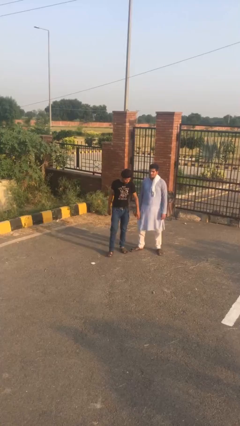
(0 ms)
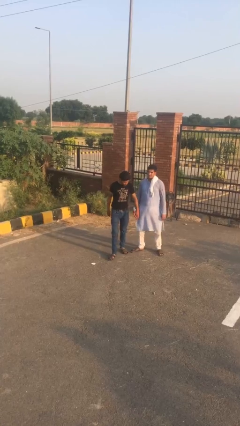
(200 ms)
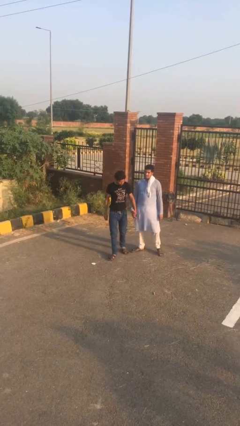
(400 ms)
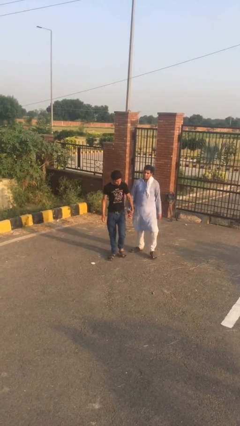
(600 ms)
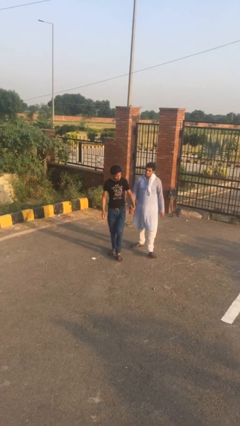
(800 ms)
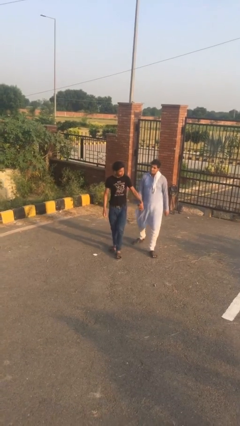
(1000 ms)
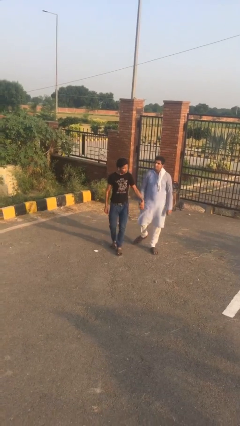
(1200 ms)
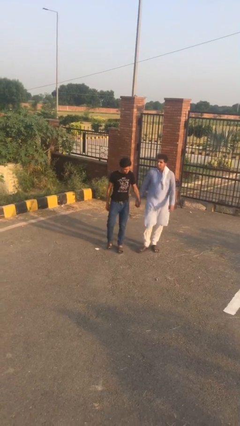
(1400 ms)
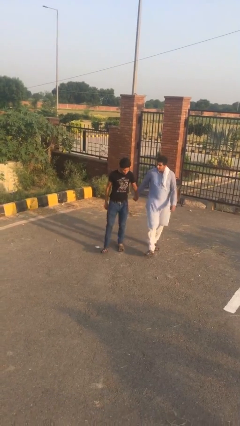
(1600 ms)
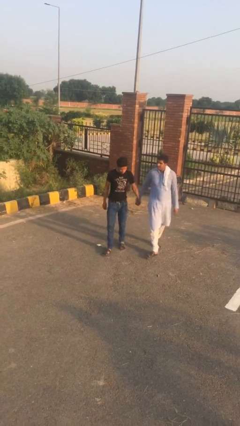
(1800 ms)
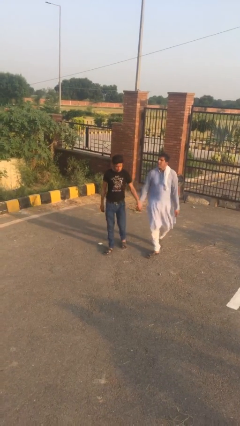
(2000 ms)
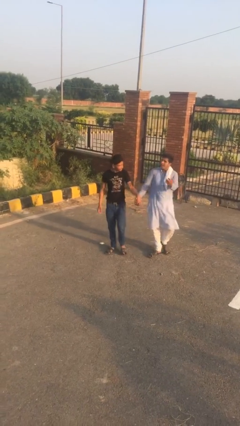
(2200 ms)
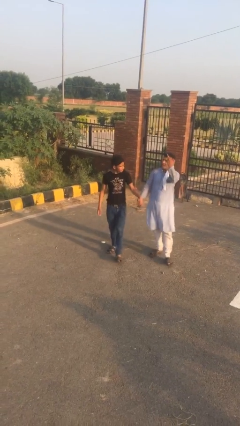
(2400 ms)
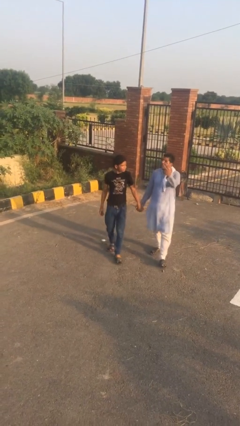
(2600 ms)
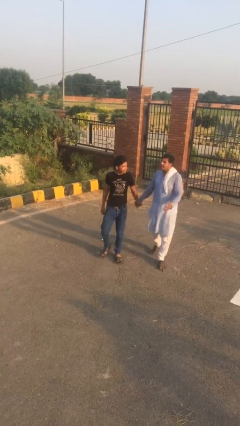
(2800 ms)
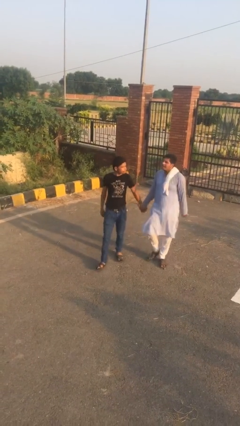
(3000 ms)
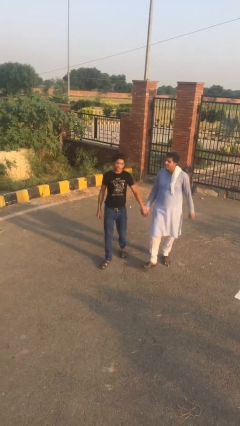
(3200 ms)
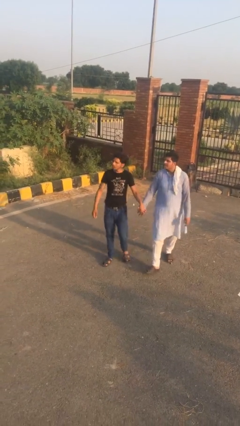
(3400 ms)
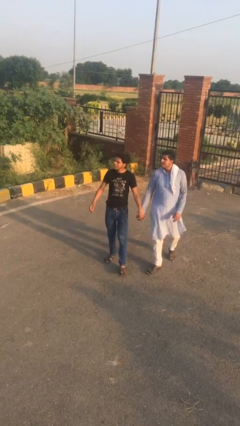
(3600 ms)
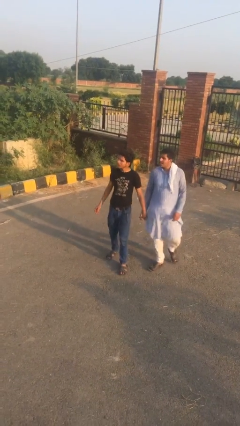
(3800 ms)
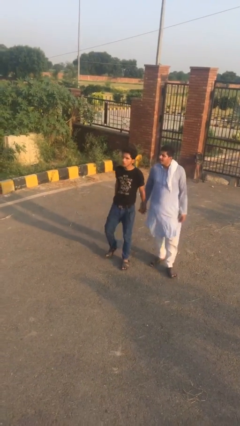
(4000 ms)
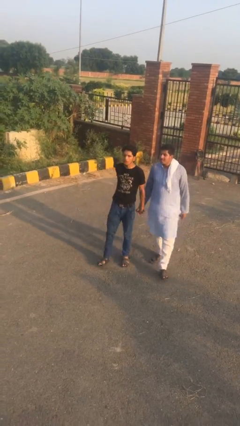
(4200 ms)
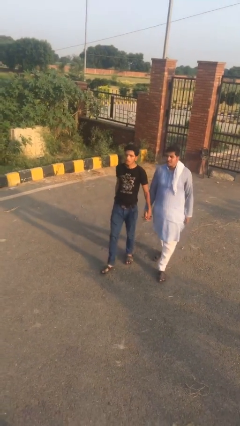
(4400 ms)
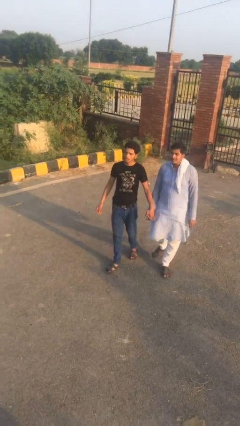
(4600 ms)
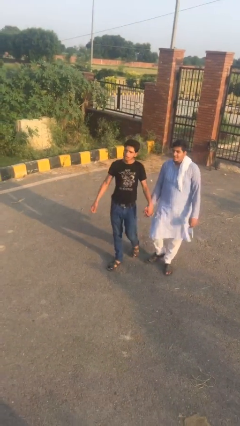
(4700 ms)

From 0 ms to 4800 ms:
person holds hand

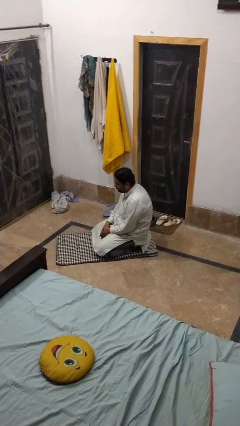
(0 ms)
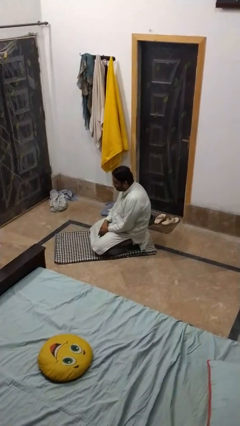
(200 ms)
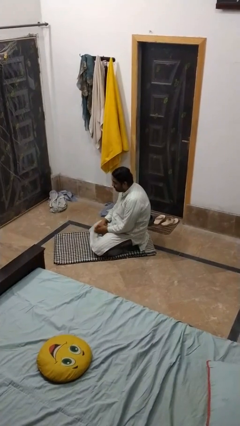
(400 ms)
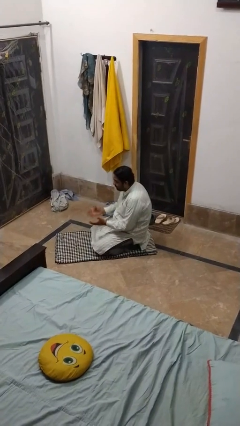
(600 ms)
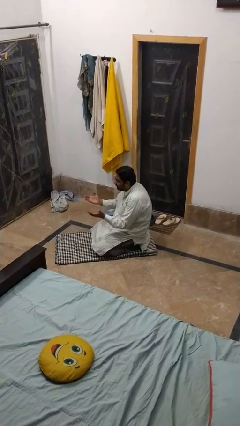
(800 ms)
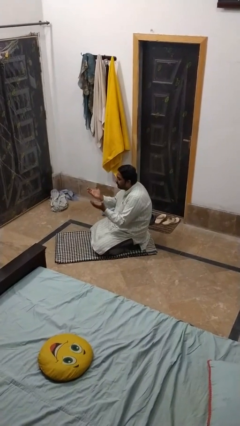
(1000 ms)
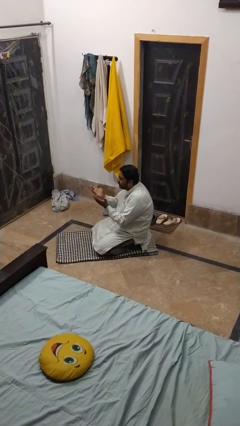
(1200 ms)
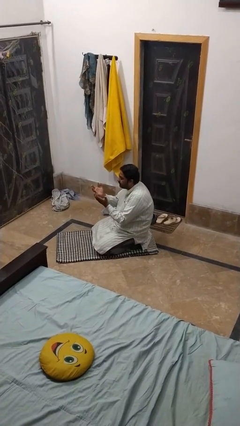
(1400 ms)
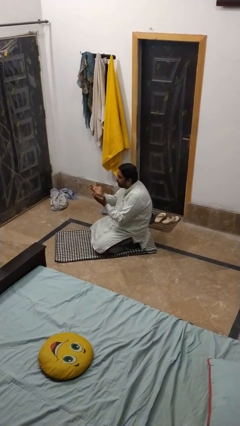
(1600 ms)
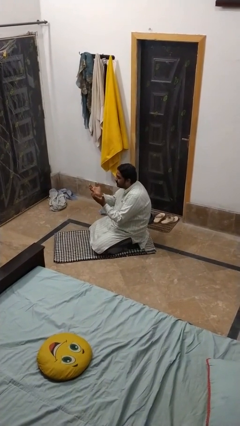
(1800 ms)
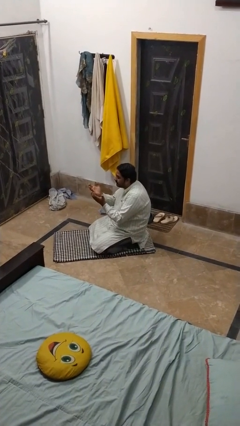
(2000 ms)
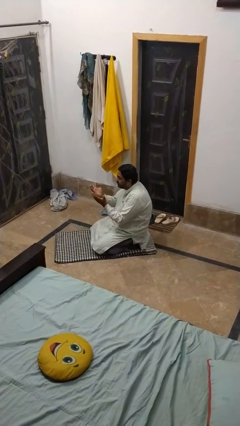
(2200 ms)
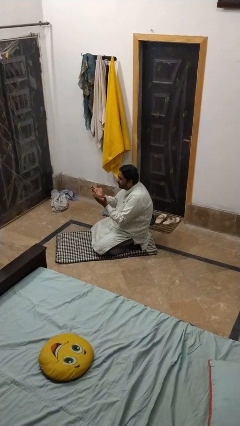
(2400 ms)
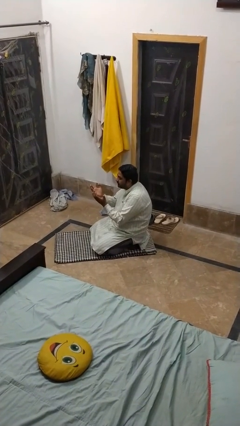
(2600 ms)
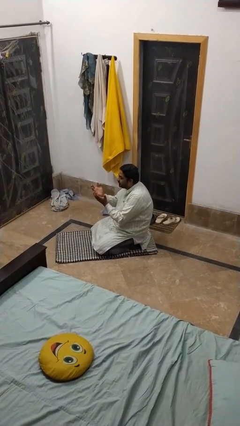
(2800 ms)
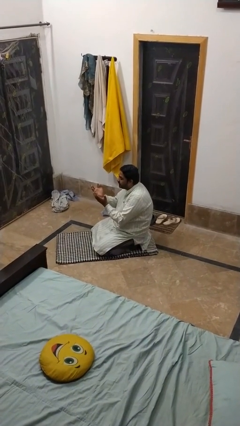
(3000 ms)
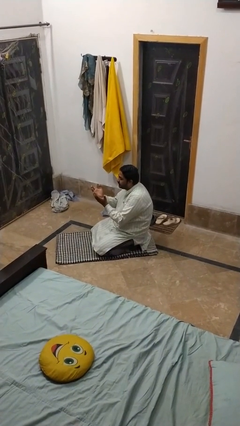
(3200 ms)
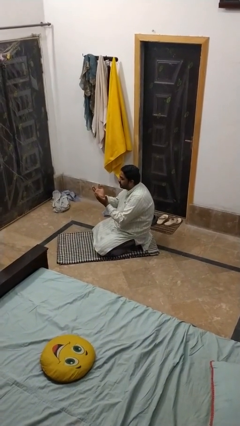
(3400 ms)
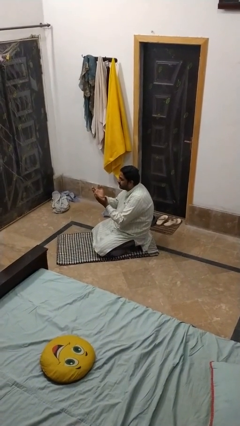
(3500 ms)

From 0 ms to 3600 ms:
person prays

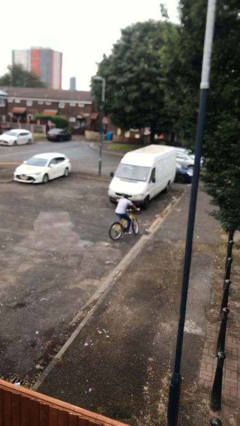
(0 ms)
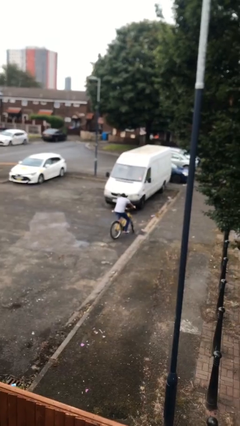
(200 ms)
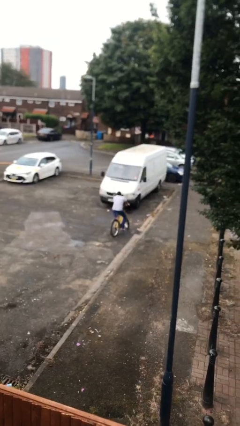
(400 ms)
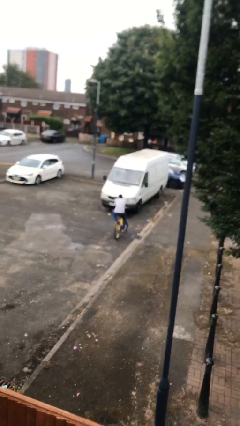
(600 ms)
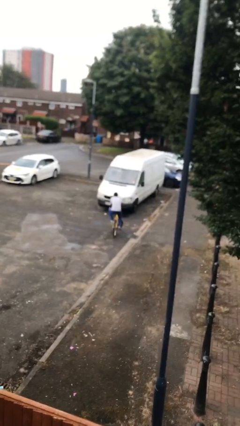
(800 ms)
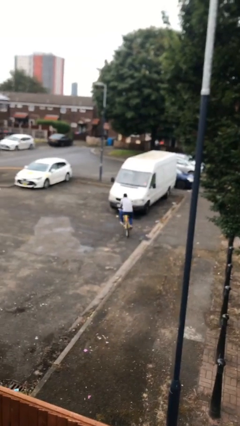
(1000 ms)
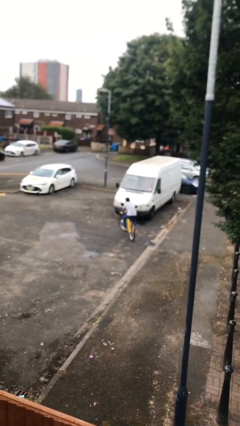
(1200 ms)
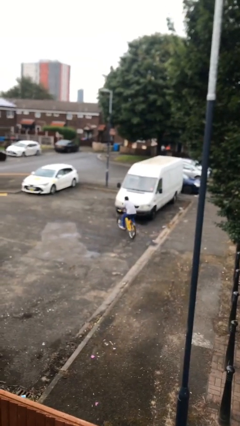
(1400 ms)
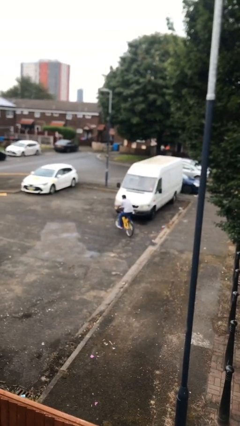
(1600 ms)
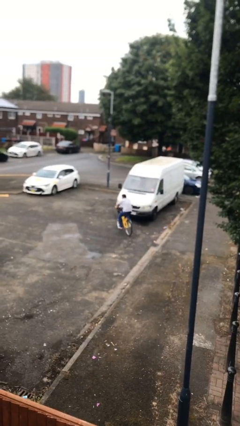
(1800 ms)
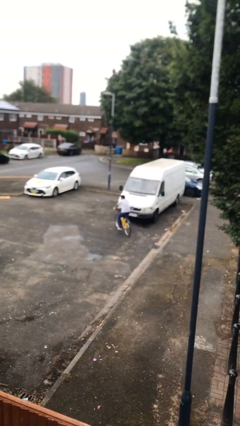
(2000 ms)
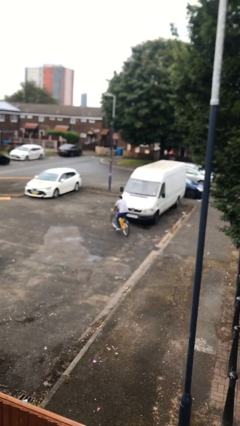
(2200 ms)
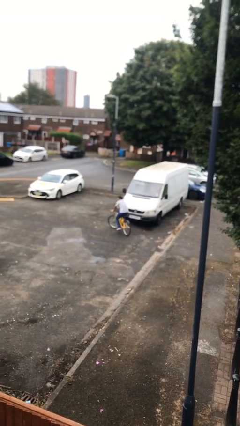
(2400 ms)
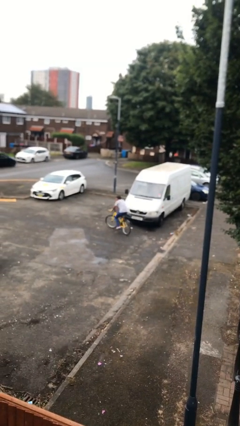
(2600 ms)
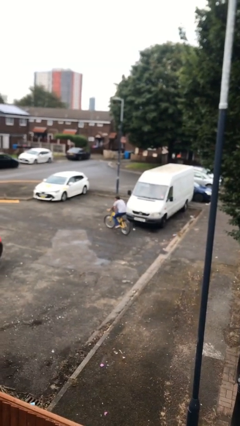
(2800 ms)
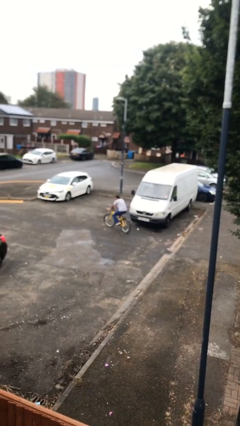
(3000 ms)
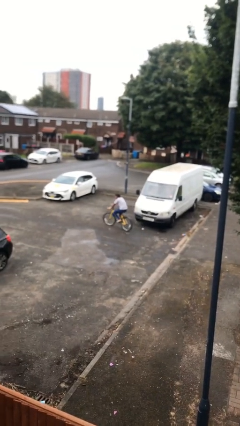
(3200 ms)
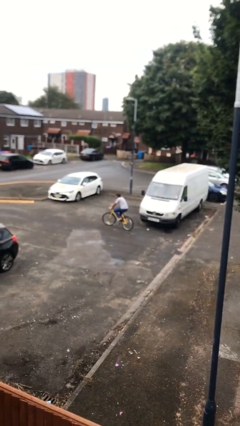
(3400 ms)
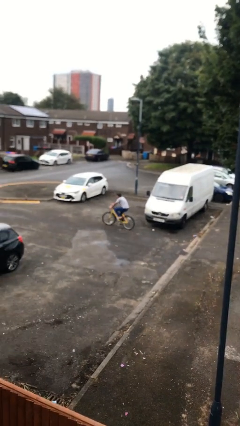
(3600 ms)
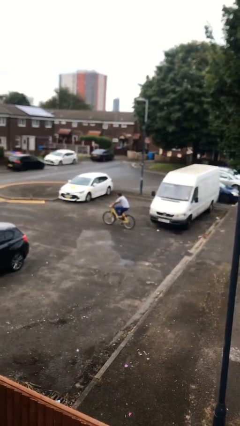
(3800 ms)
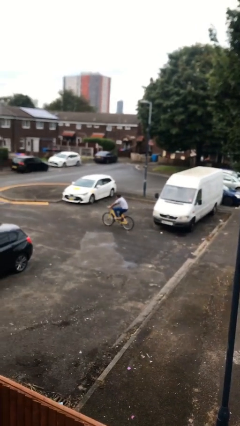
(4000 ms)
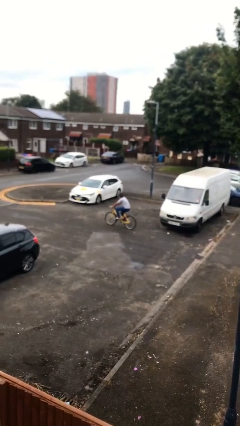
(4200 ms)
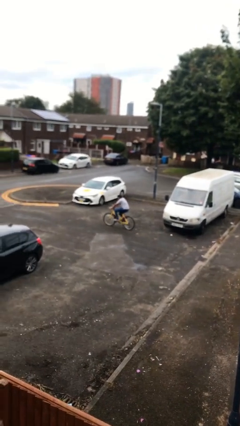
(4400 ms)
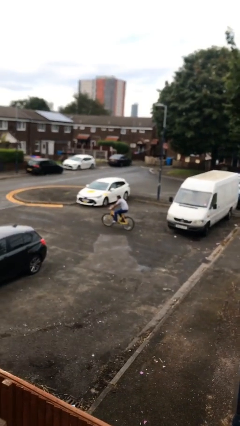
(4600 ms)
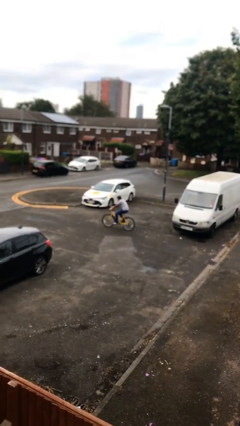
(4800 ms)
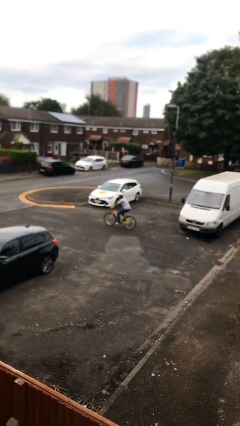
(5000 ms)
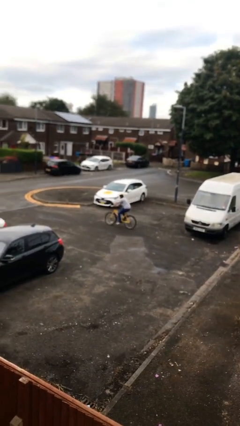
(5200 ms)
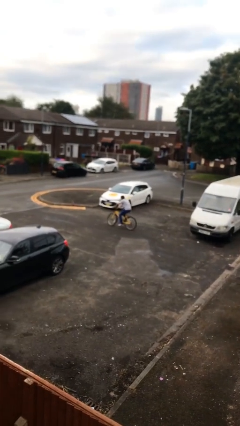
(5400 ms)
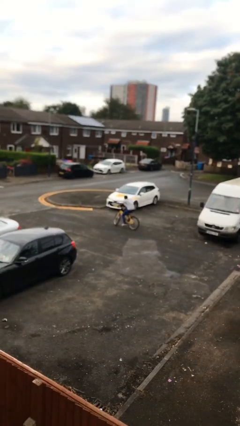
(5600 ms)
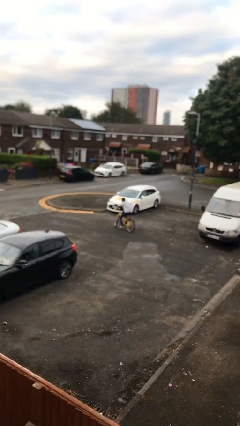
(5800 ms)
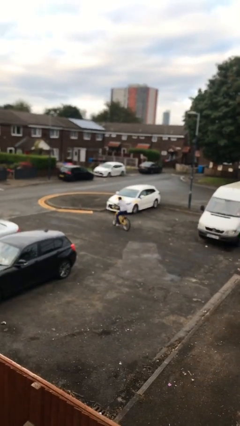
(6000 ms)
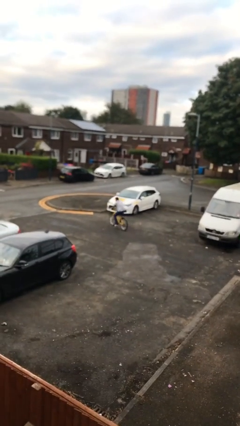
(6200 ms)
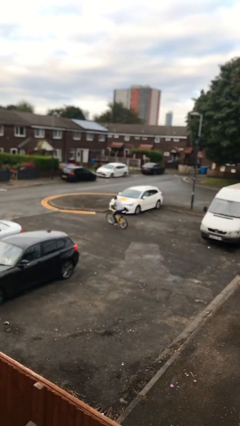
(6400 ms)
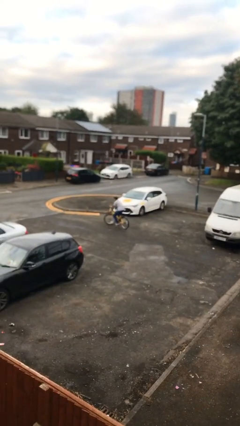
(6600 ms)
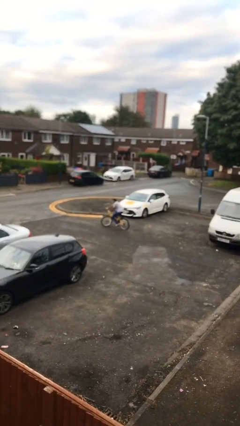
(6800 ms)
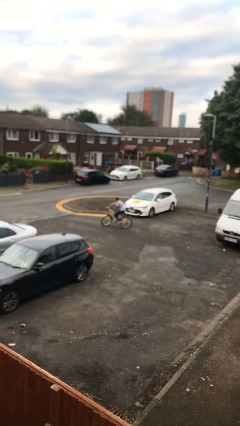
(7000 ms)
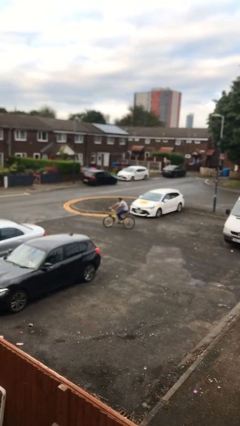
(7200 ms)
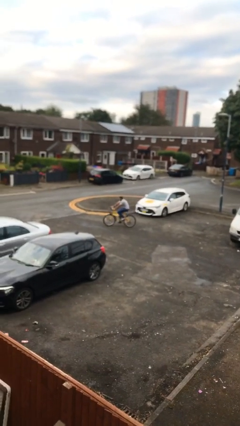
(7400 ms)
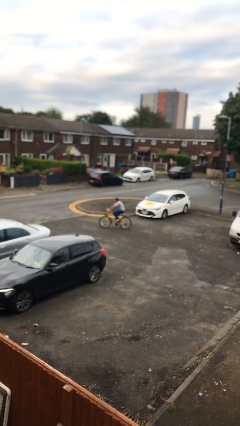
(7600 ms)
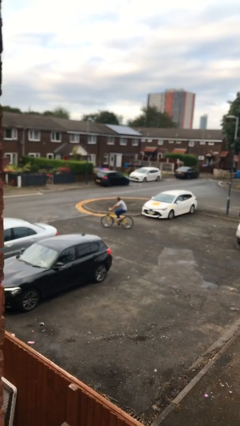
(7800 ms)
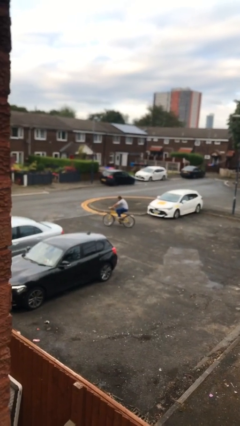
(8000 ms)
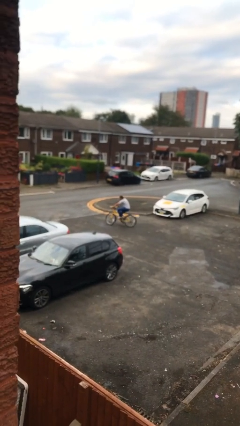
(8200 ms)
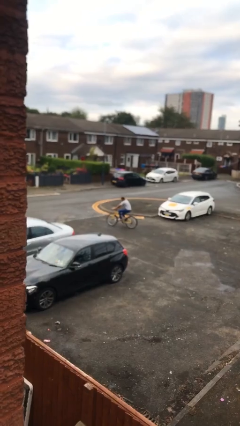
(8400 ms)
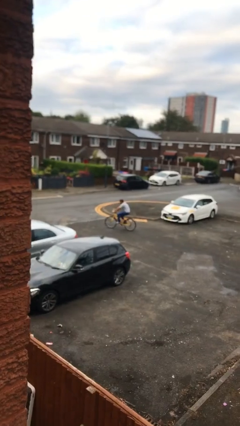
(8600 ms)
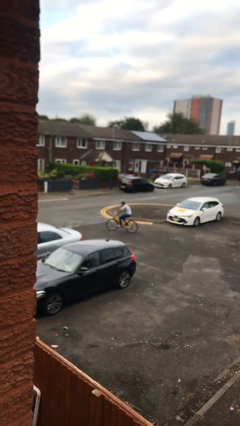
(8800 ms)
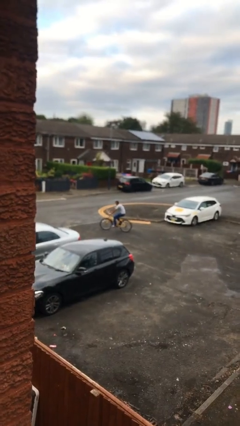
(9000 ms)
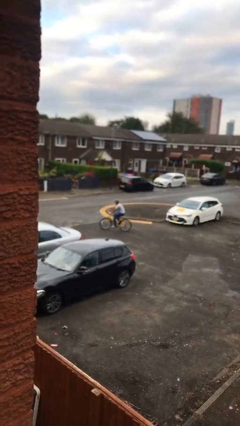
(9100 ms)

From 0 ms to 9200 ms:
person rides bicycle

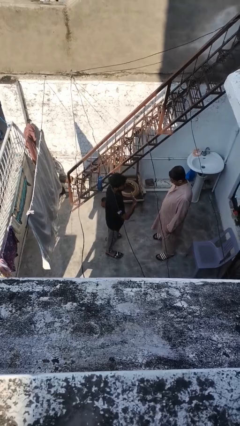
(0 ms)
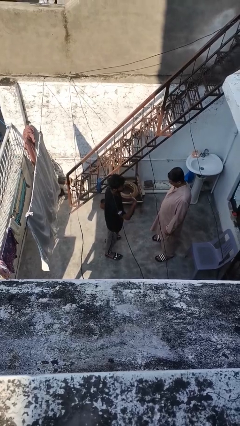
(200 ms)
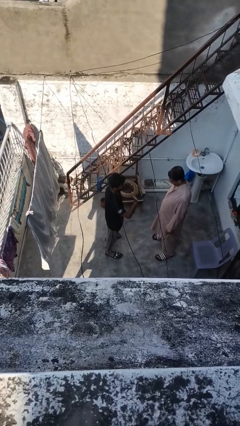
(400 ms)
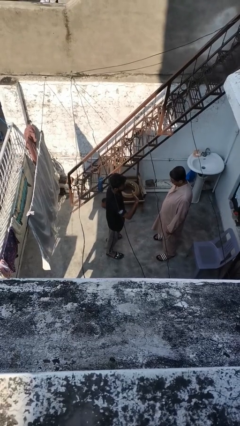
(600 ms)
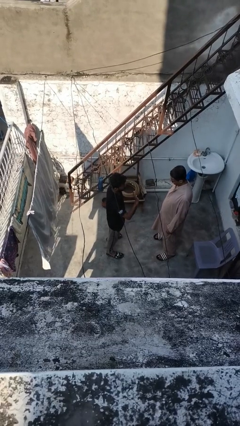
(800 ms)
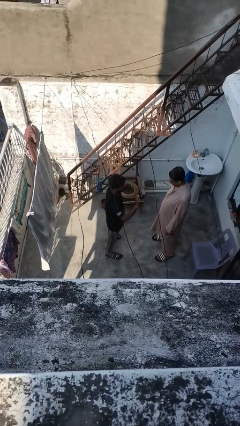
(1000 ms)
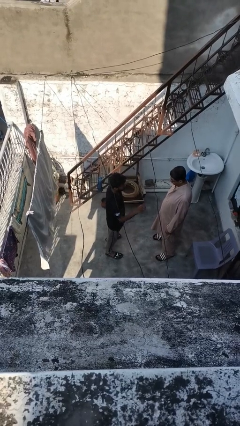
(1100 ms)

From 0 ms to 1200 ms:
person waves at person
